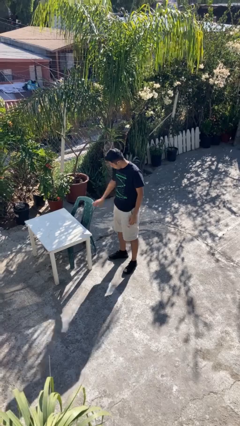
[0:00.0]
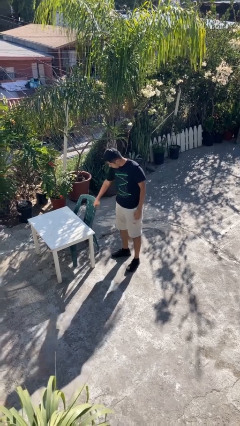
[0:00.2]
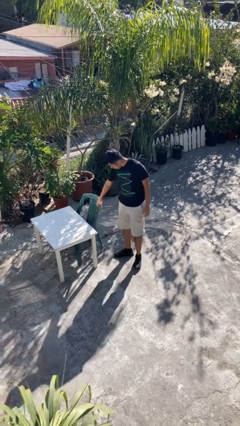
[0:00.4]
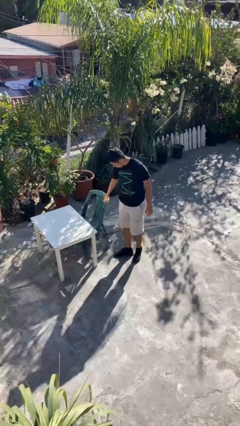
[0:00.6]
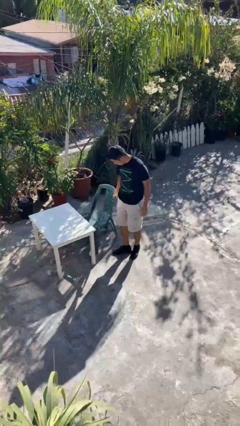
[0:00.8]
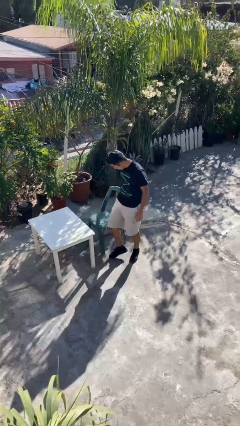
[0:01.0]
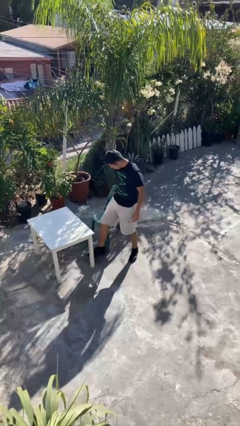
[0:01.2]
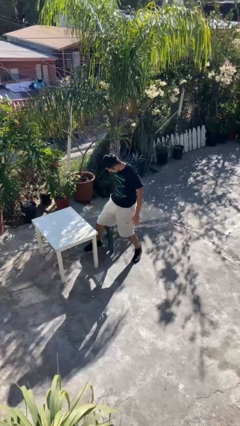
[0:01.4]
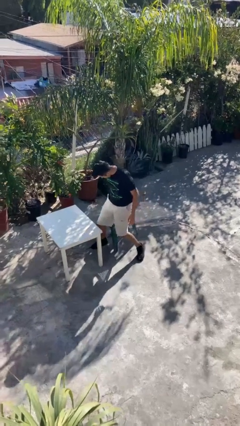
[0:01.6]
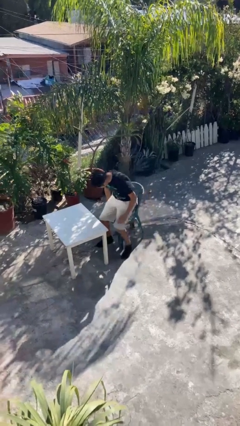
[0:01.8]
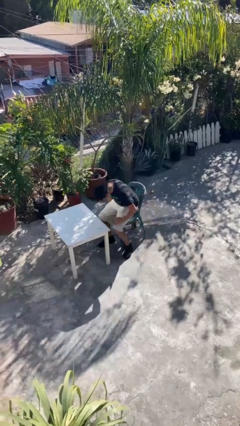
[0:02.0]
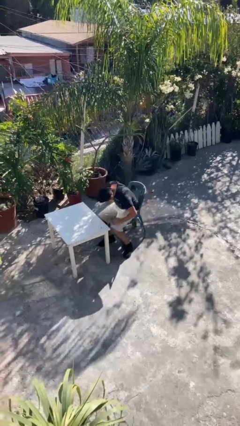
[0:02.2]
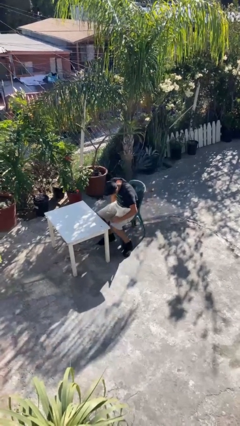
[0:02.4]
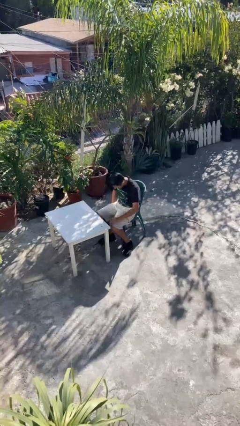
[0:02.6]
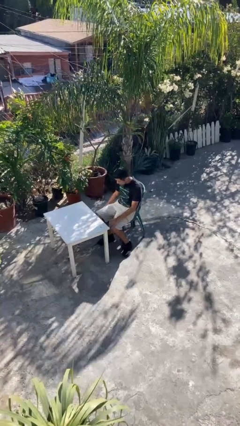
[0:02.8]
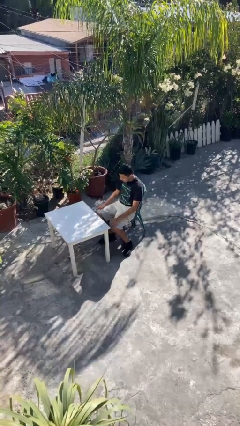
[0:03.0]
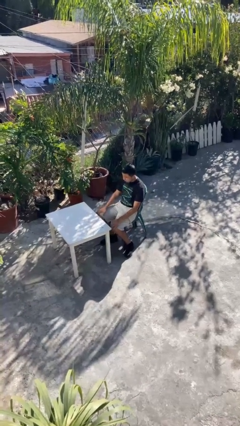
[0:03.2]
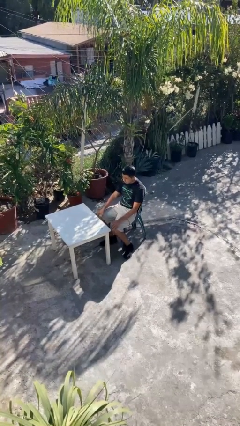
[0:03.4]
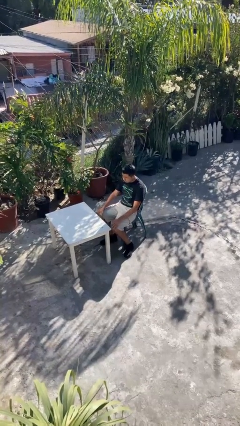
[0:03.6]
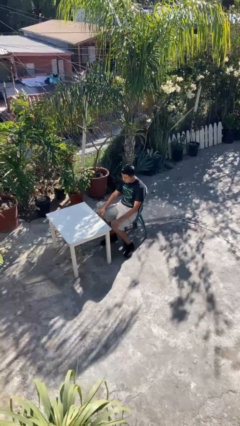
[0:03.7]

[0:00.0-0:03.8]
person sits down

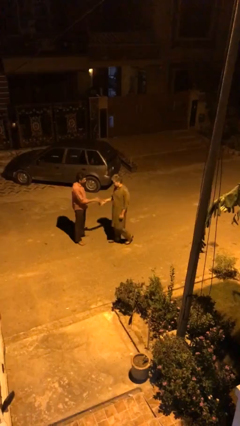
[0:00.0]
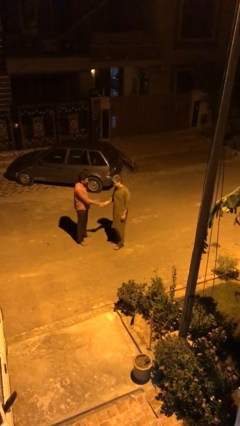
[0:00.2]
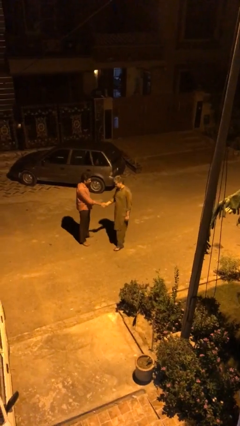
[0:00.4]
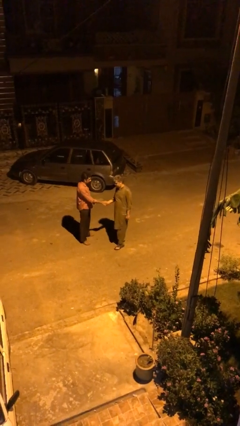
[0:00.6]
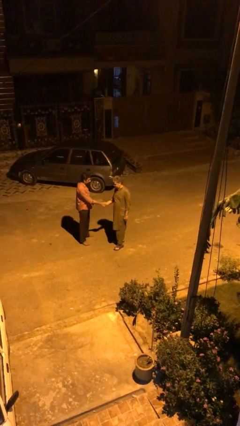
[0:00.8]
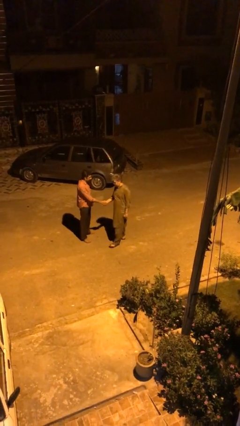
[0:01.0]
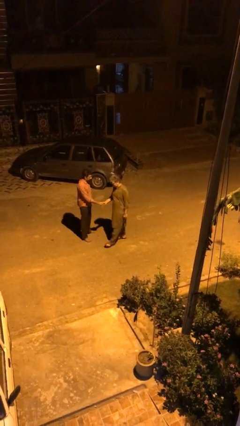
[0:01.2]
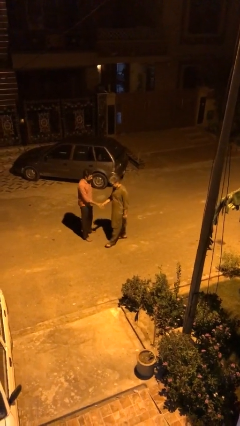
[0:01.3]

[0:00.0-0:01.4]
person shakes hand

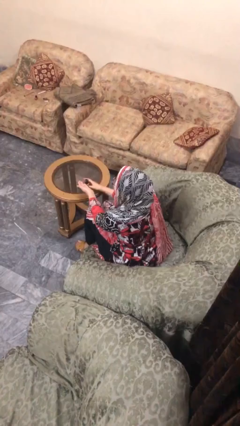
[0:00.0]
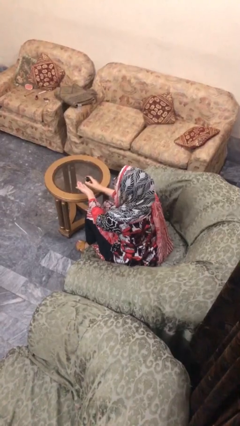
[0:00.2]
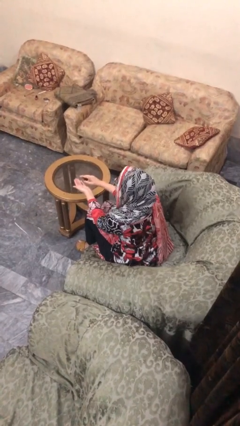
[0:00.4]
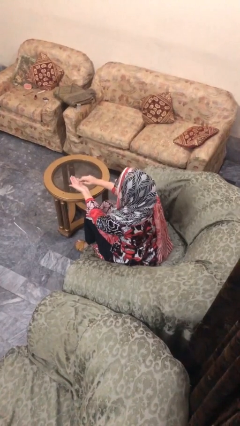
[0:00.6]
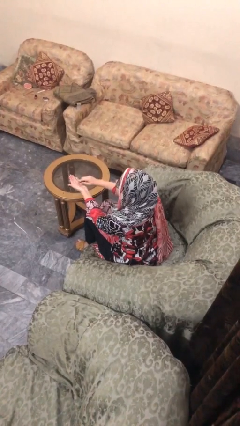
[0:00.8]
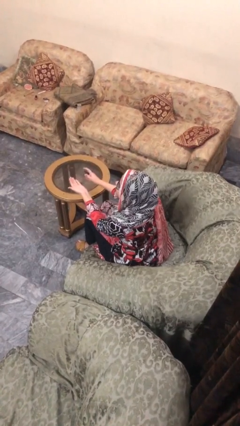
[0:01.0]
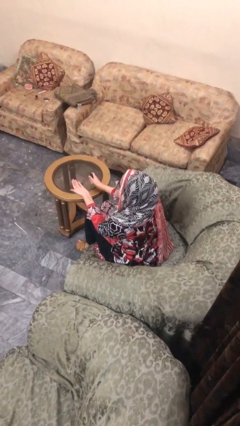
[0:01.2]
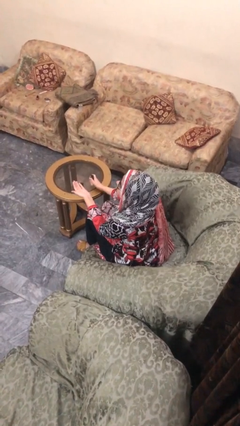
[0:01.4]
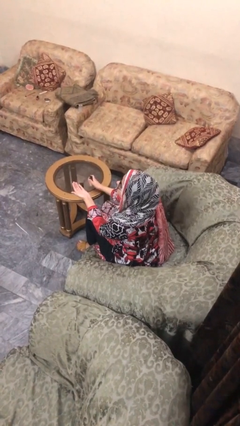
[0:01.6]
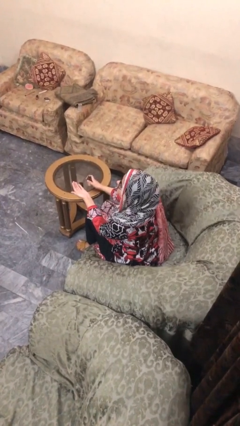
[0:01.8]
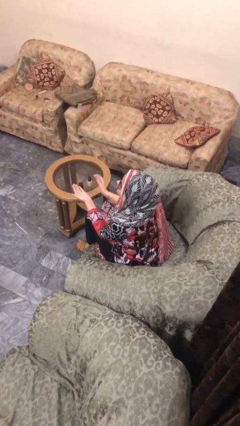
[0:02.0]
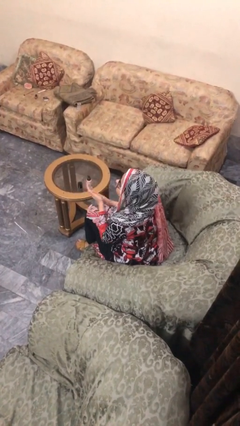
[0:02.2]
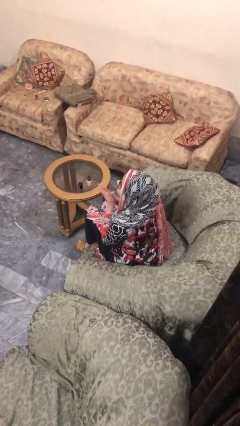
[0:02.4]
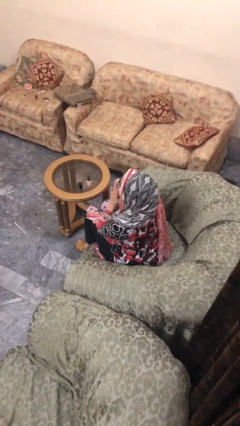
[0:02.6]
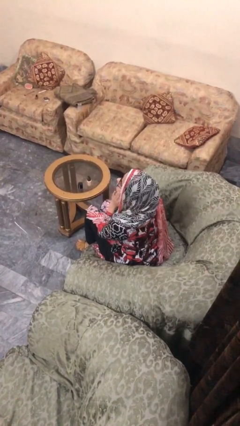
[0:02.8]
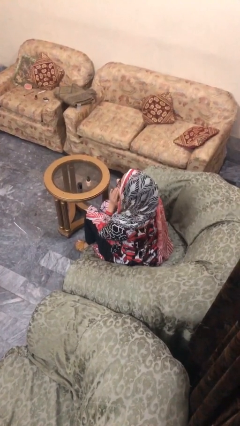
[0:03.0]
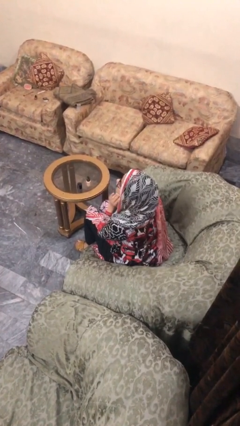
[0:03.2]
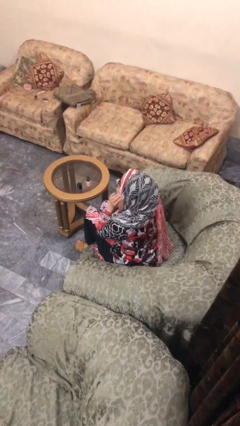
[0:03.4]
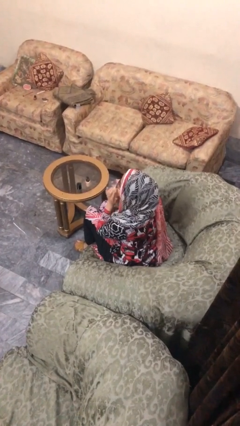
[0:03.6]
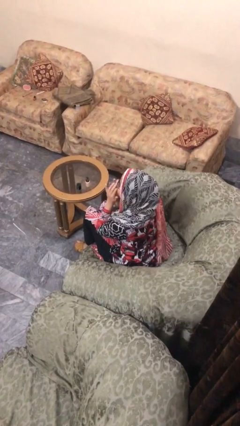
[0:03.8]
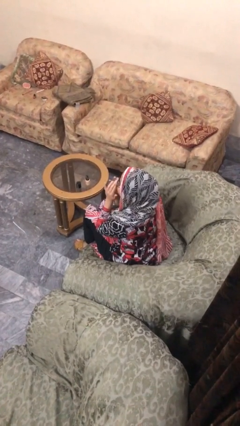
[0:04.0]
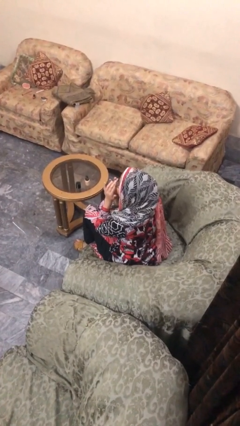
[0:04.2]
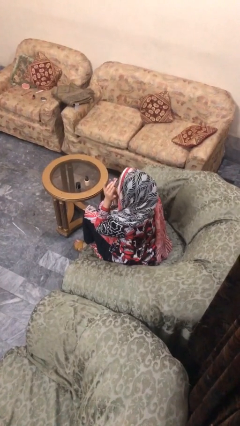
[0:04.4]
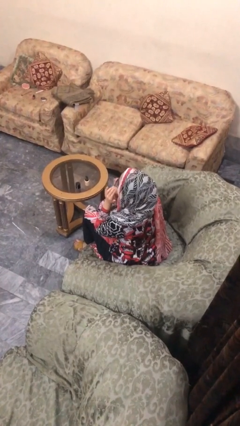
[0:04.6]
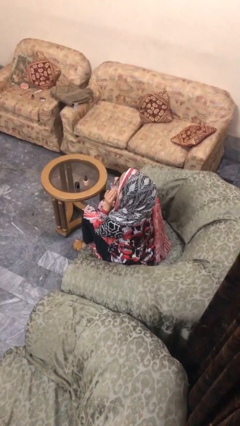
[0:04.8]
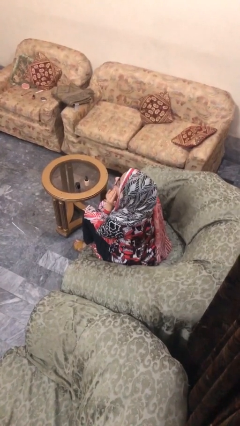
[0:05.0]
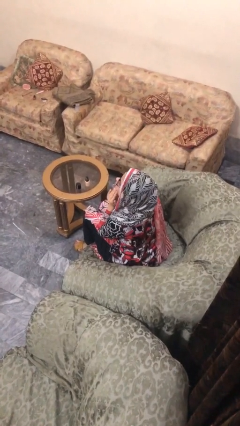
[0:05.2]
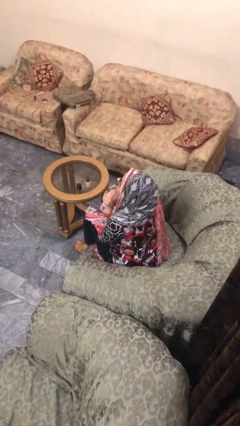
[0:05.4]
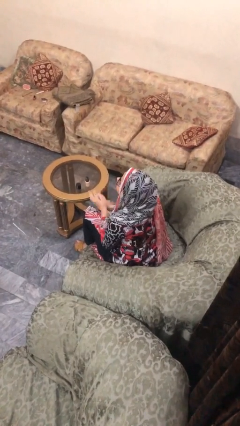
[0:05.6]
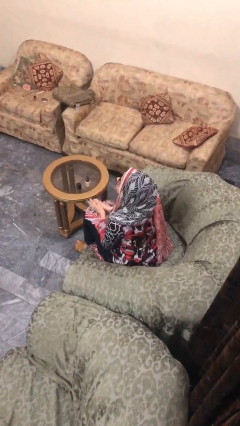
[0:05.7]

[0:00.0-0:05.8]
person applies foundation makeup

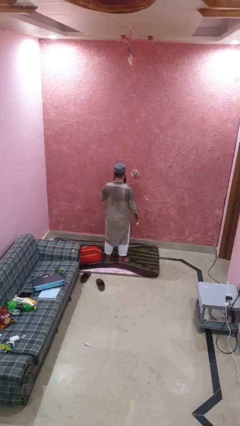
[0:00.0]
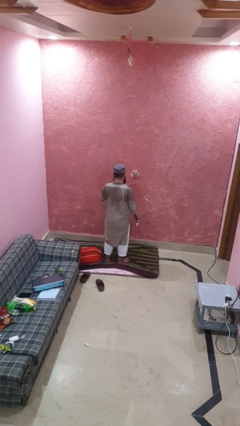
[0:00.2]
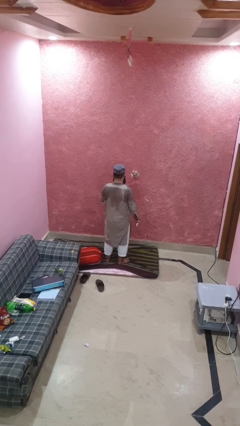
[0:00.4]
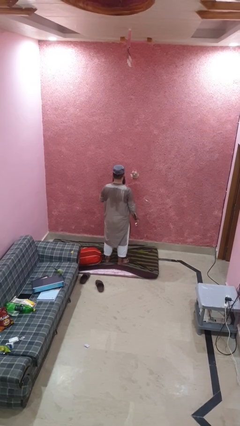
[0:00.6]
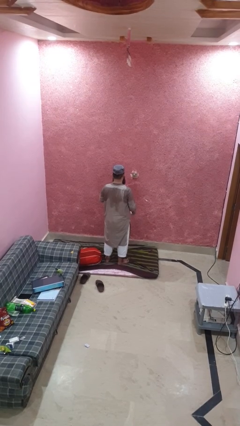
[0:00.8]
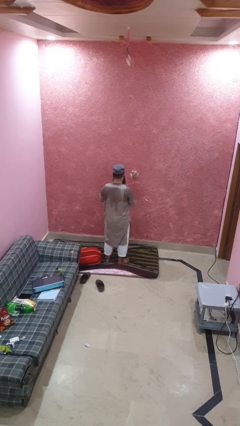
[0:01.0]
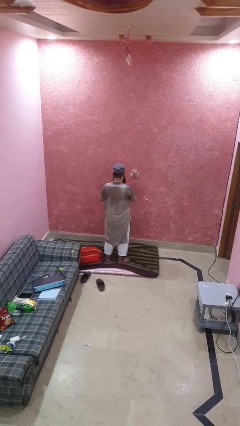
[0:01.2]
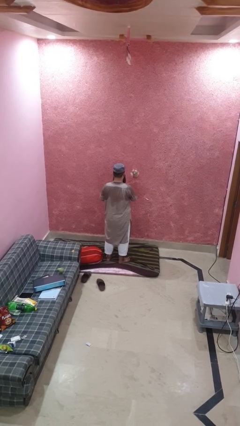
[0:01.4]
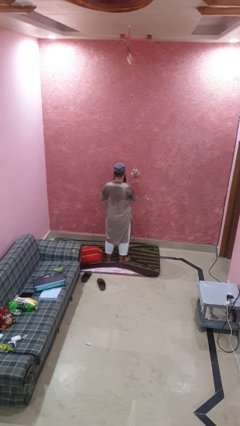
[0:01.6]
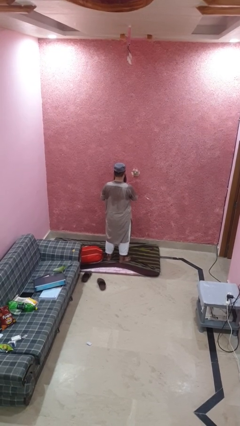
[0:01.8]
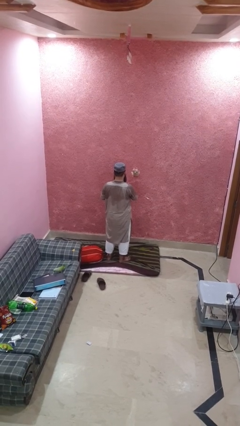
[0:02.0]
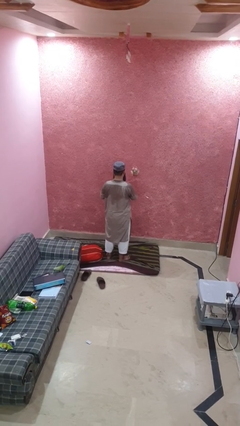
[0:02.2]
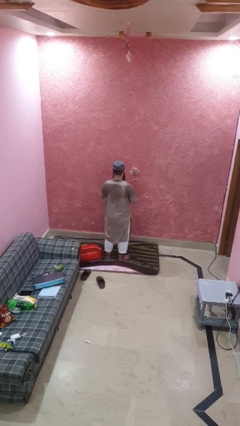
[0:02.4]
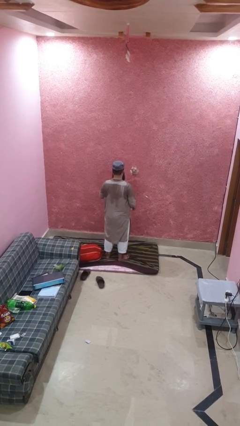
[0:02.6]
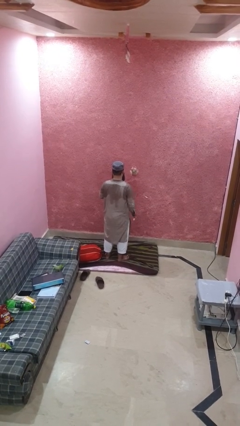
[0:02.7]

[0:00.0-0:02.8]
person wipes mouth with napkin

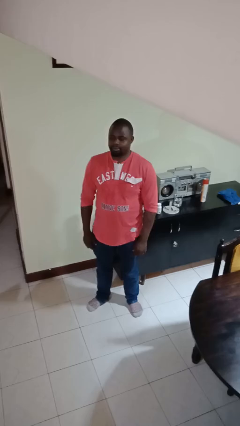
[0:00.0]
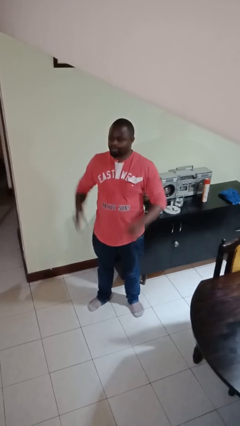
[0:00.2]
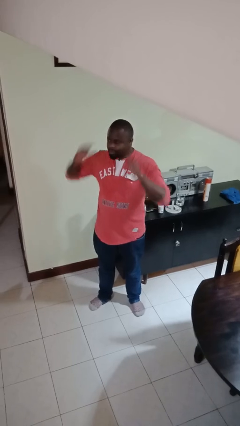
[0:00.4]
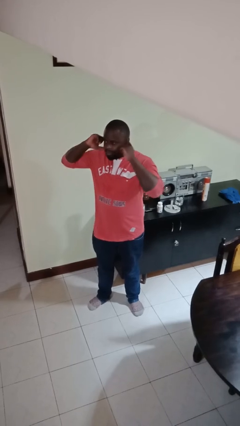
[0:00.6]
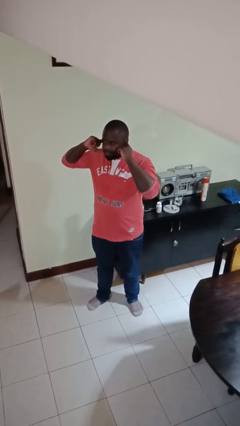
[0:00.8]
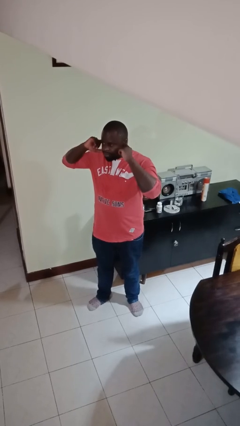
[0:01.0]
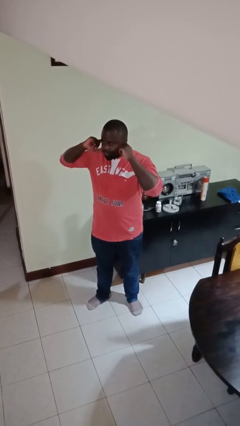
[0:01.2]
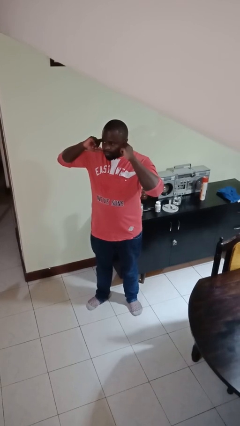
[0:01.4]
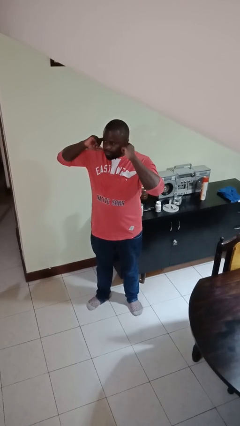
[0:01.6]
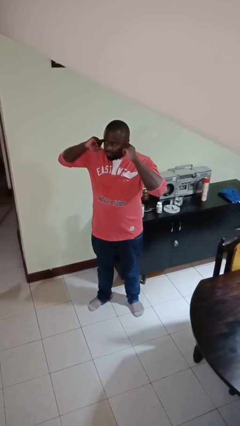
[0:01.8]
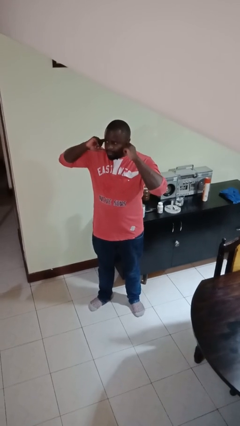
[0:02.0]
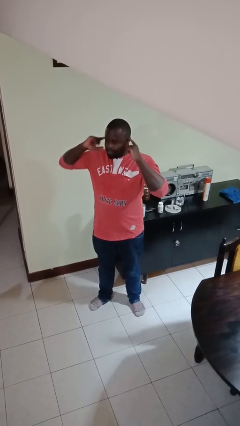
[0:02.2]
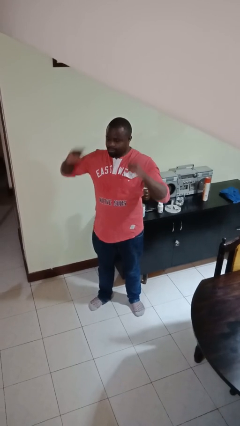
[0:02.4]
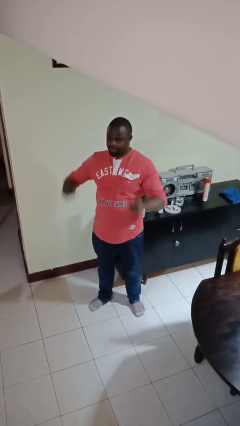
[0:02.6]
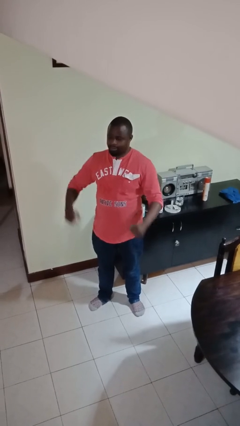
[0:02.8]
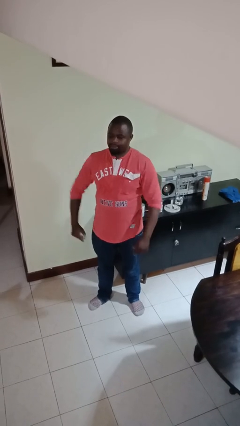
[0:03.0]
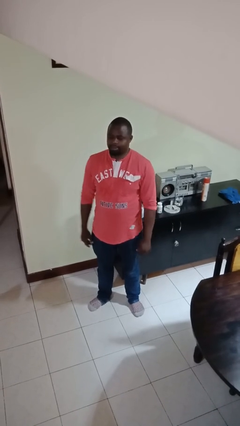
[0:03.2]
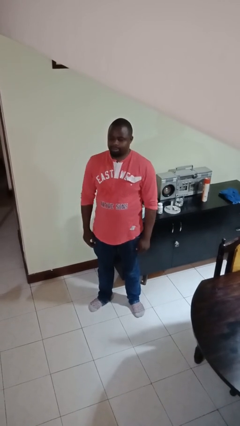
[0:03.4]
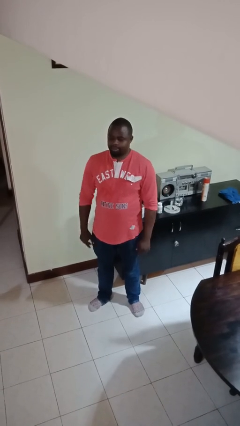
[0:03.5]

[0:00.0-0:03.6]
person puts fingers in ear

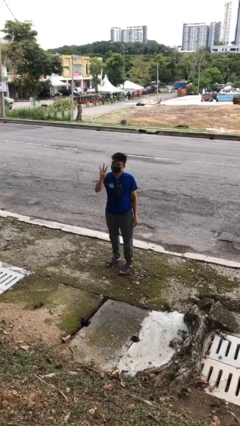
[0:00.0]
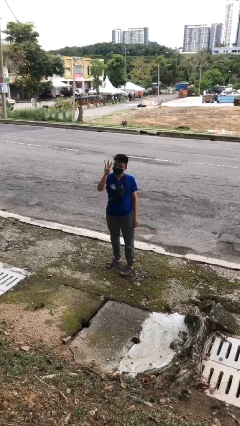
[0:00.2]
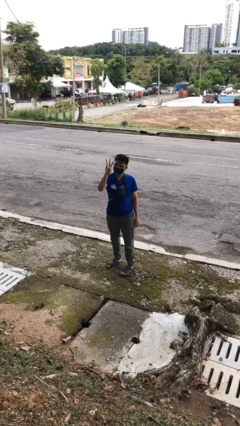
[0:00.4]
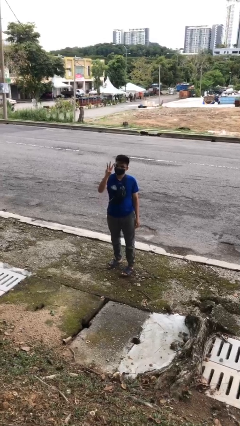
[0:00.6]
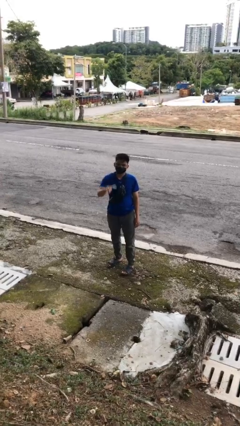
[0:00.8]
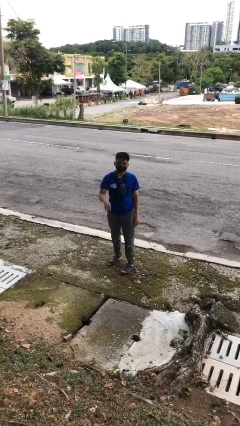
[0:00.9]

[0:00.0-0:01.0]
person gestures number three
